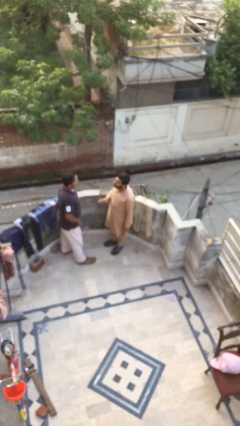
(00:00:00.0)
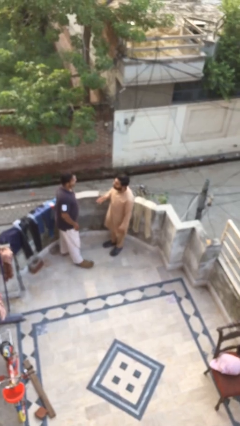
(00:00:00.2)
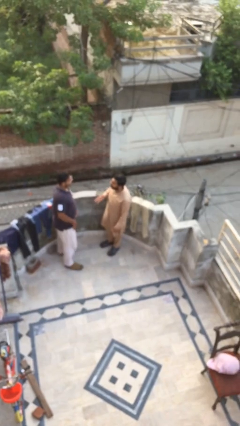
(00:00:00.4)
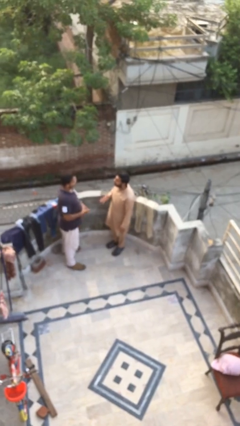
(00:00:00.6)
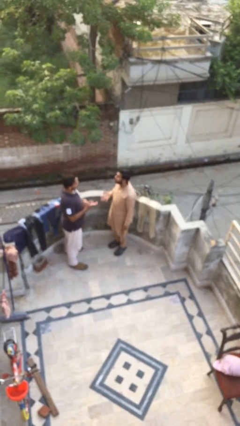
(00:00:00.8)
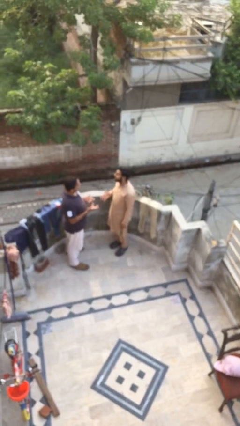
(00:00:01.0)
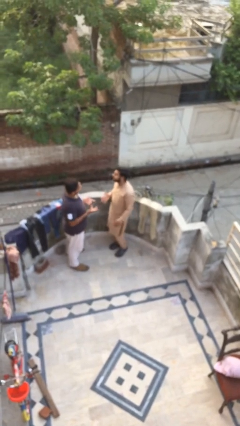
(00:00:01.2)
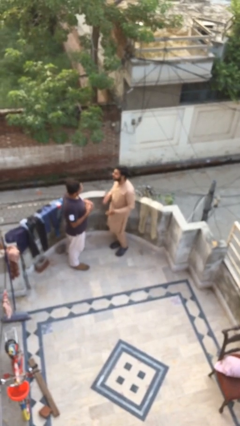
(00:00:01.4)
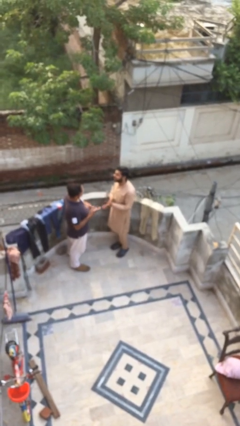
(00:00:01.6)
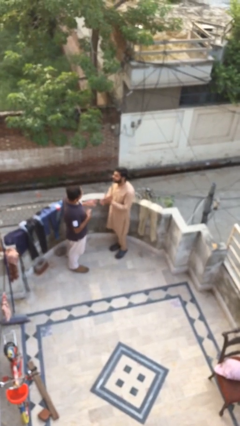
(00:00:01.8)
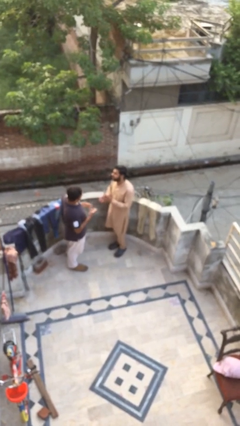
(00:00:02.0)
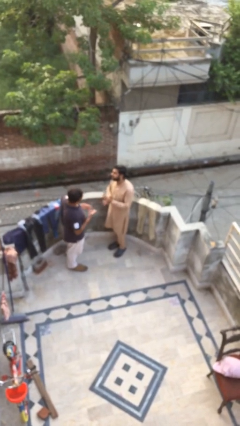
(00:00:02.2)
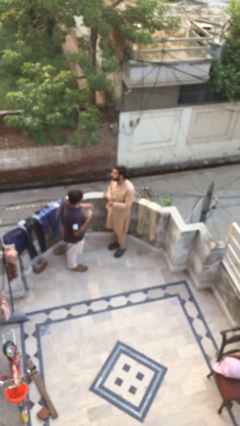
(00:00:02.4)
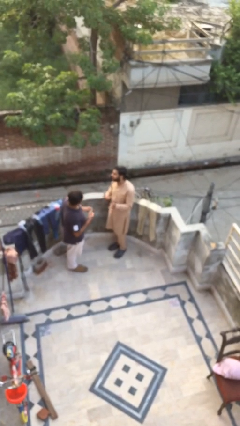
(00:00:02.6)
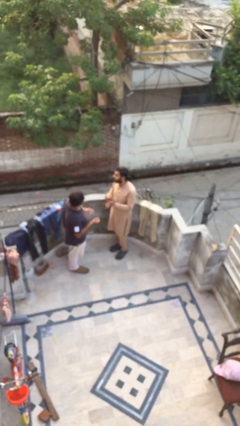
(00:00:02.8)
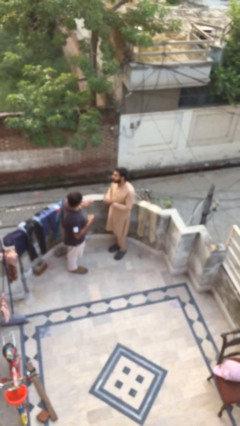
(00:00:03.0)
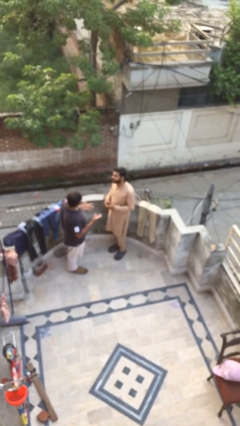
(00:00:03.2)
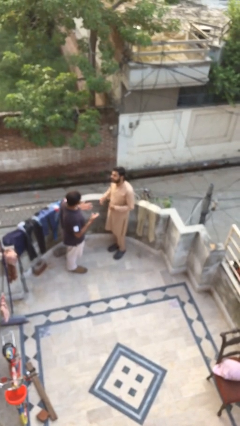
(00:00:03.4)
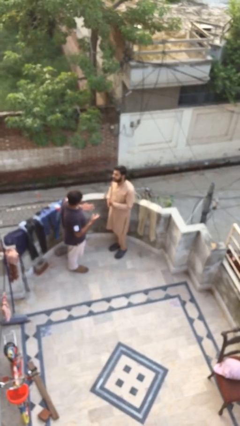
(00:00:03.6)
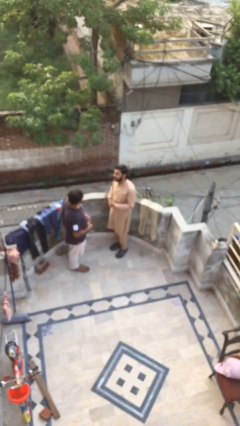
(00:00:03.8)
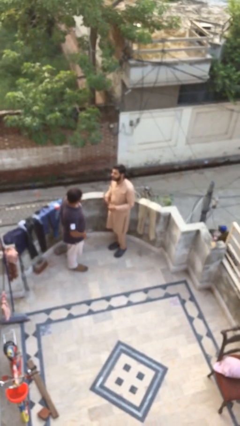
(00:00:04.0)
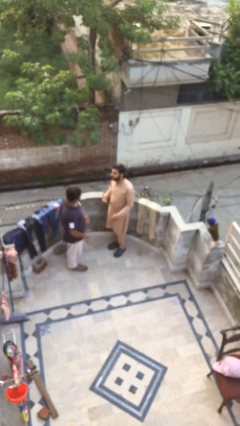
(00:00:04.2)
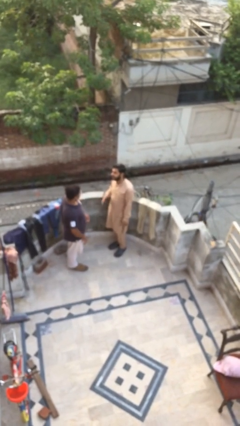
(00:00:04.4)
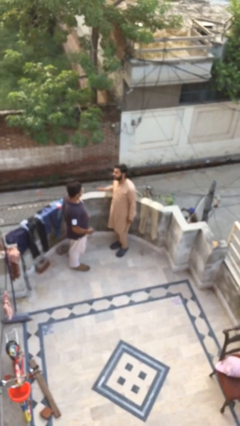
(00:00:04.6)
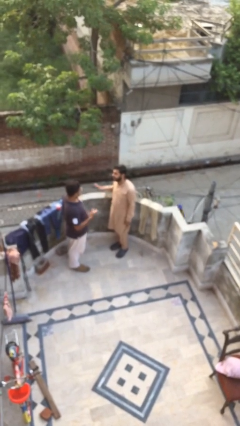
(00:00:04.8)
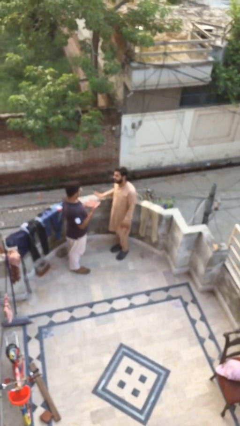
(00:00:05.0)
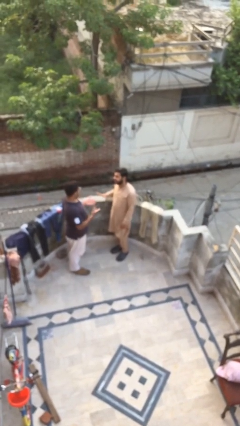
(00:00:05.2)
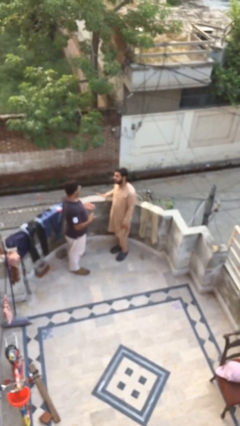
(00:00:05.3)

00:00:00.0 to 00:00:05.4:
person talks to person

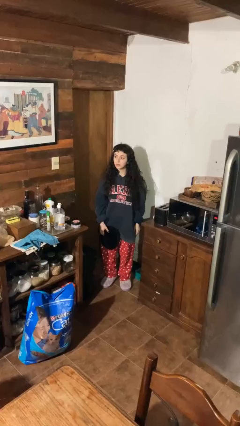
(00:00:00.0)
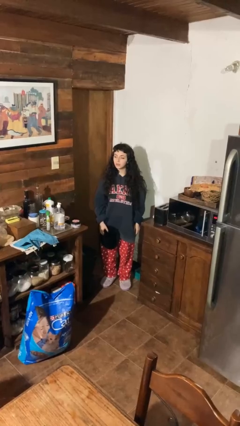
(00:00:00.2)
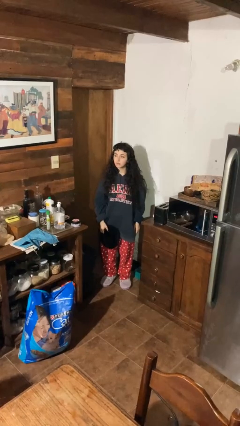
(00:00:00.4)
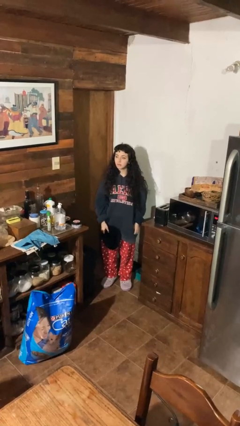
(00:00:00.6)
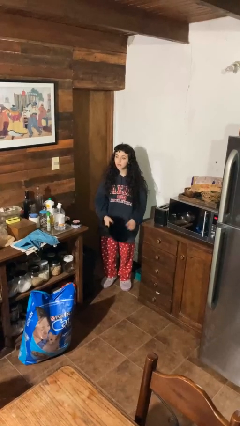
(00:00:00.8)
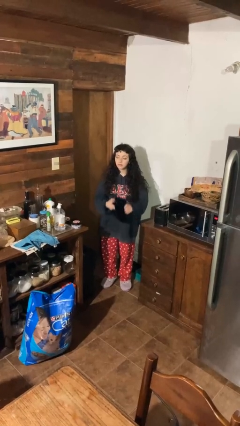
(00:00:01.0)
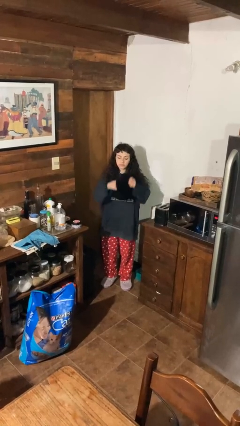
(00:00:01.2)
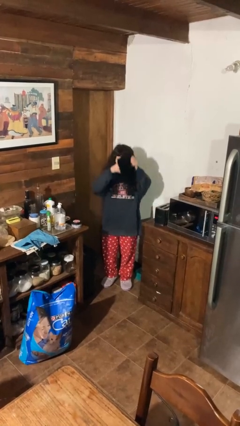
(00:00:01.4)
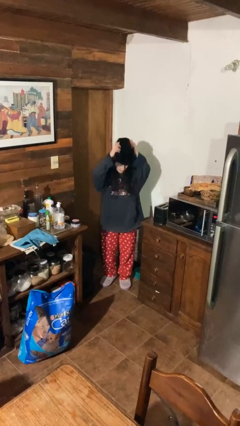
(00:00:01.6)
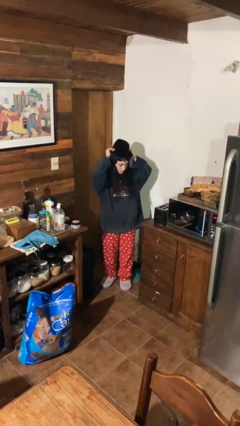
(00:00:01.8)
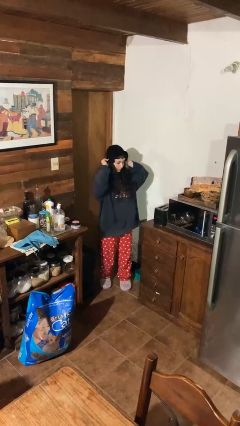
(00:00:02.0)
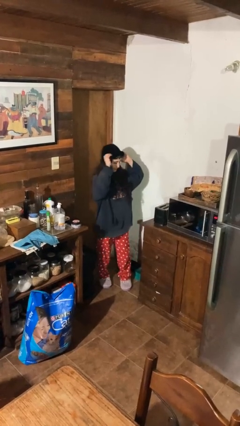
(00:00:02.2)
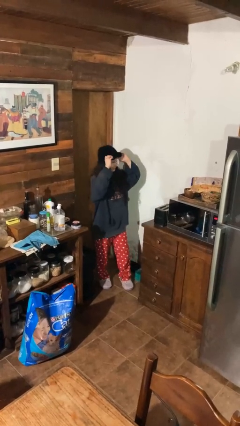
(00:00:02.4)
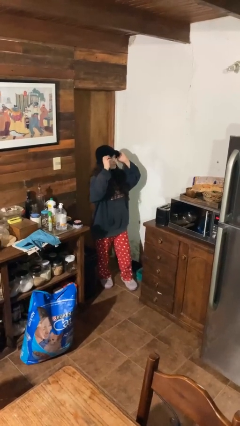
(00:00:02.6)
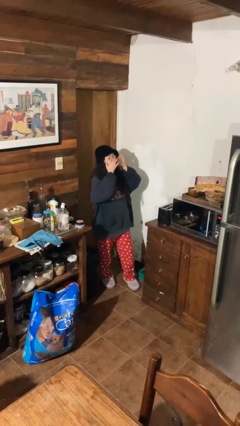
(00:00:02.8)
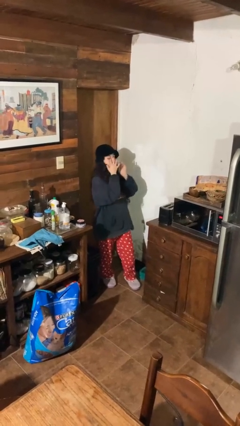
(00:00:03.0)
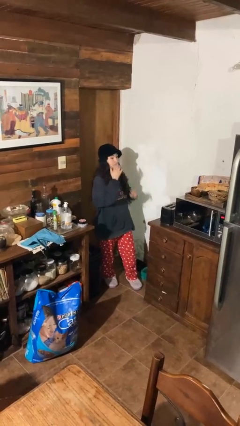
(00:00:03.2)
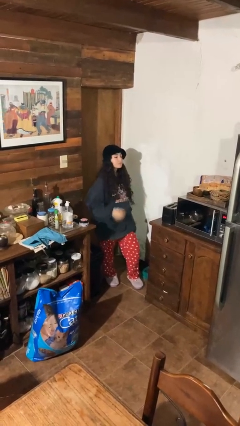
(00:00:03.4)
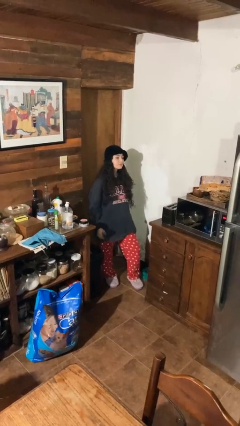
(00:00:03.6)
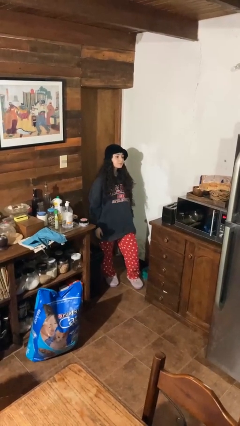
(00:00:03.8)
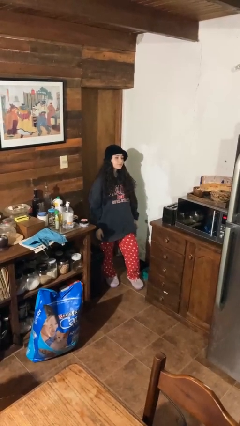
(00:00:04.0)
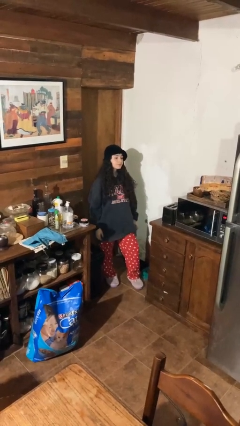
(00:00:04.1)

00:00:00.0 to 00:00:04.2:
person puts on hat

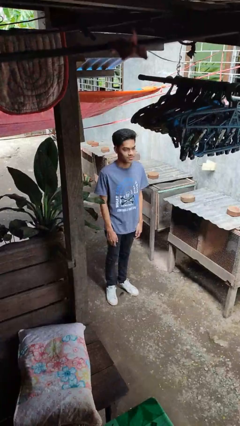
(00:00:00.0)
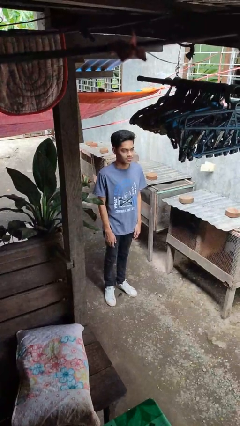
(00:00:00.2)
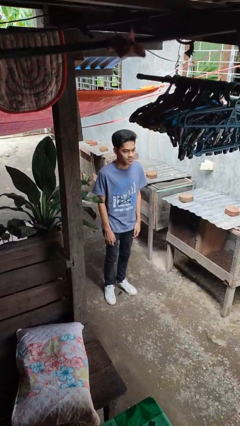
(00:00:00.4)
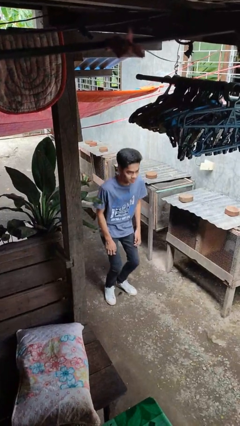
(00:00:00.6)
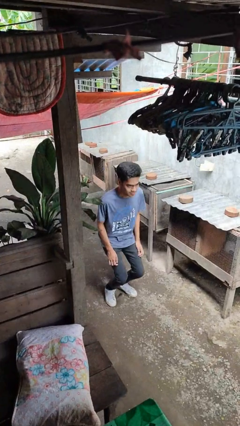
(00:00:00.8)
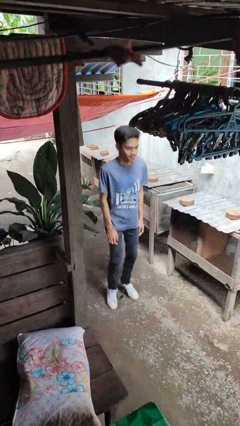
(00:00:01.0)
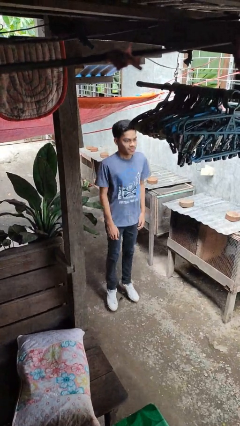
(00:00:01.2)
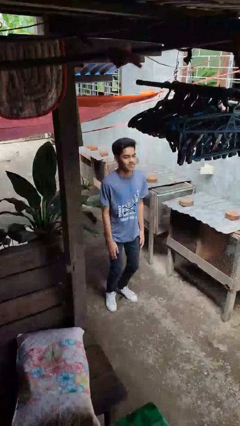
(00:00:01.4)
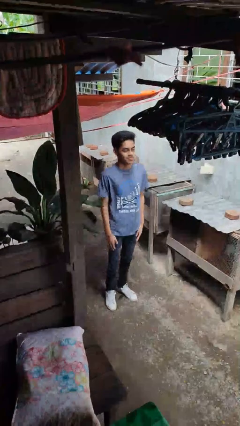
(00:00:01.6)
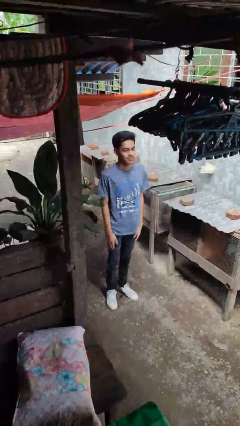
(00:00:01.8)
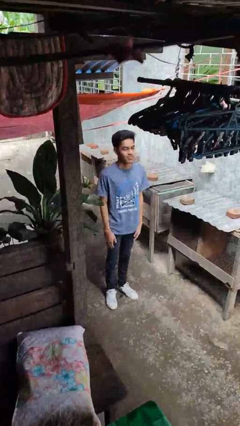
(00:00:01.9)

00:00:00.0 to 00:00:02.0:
person jumps

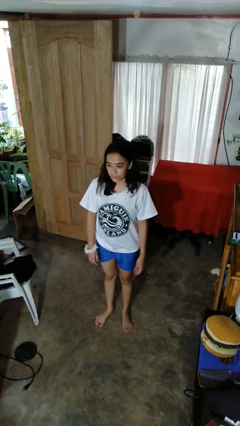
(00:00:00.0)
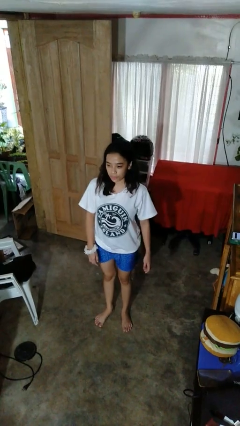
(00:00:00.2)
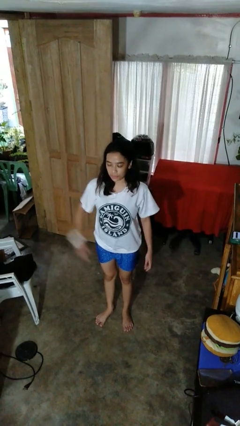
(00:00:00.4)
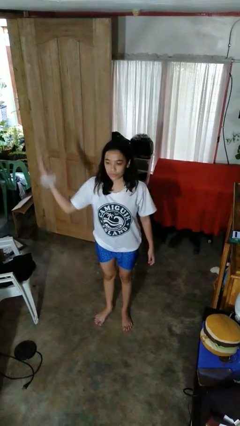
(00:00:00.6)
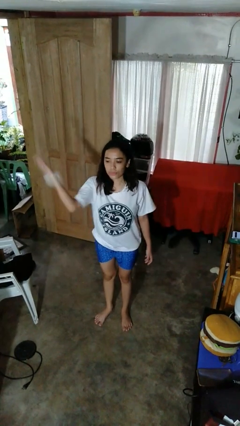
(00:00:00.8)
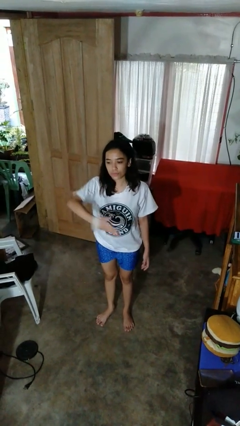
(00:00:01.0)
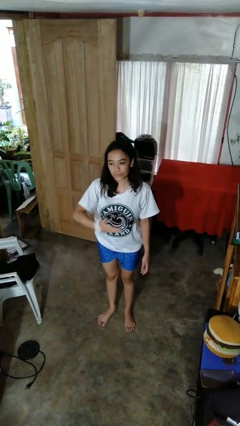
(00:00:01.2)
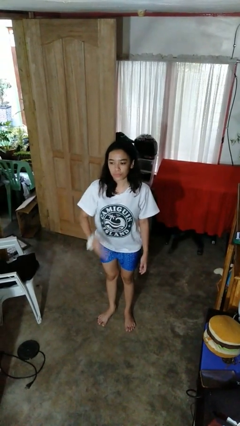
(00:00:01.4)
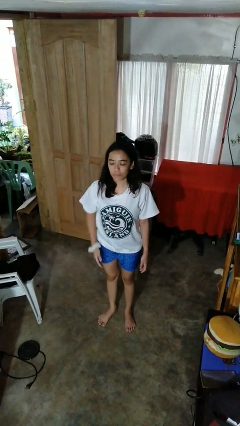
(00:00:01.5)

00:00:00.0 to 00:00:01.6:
person karate chop

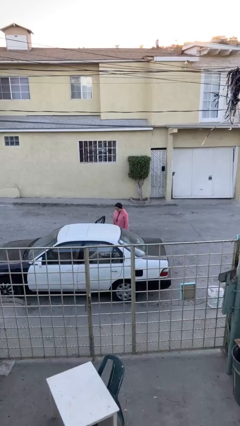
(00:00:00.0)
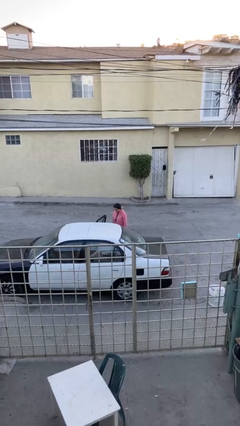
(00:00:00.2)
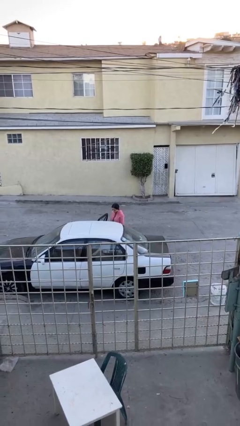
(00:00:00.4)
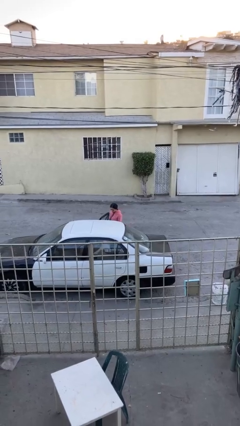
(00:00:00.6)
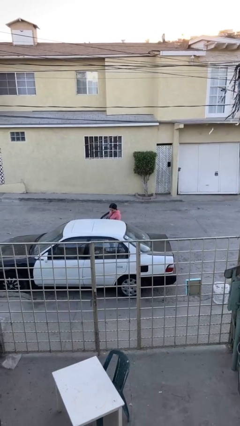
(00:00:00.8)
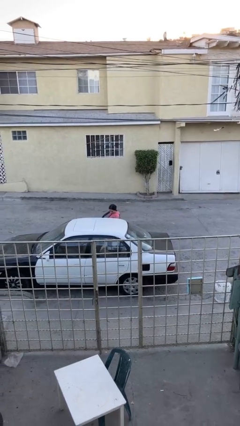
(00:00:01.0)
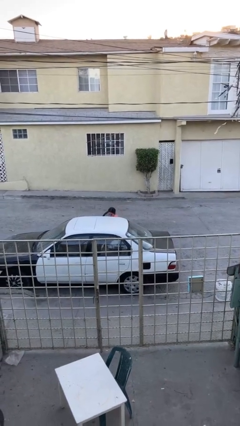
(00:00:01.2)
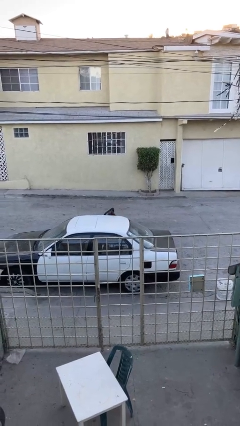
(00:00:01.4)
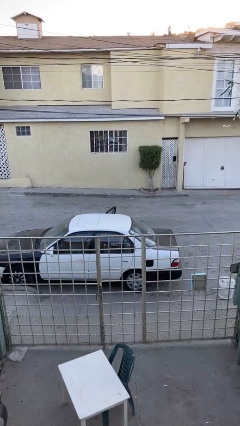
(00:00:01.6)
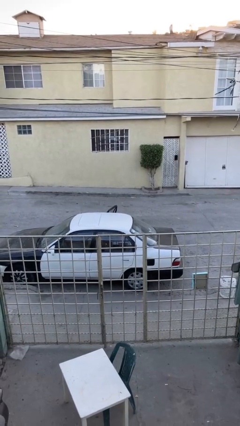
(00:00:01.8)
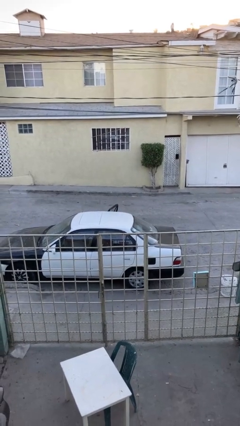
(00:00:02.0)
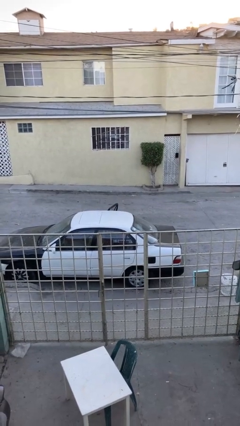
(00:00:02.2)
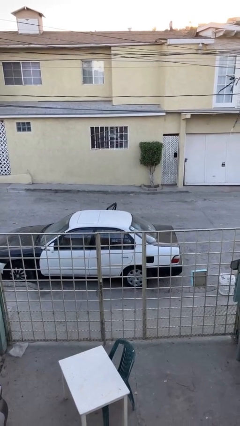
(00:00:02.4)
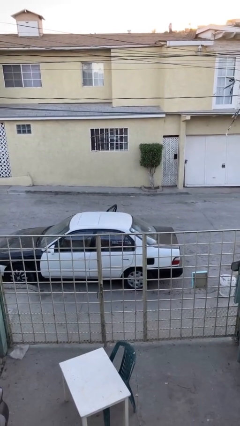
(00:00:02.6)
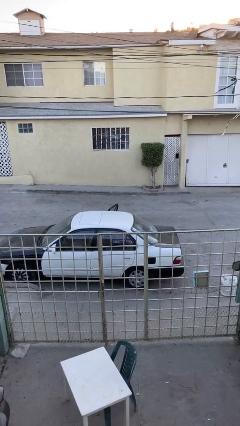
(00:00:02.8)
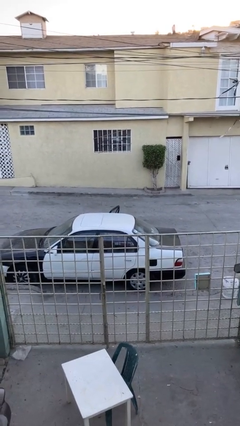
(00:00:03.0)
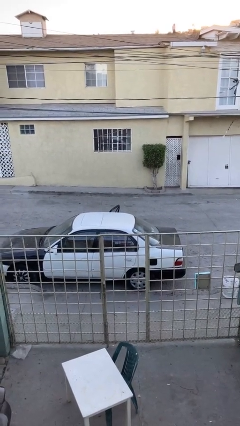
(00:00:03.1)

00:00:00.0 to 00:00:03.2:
person enters car

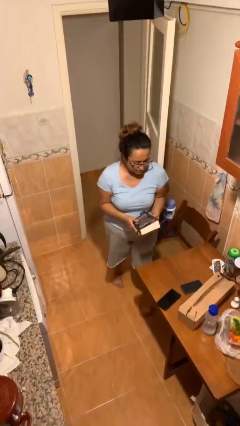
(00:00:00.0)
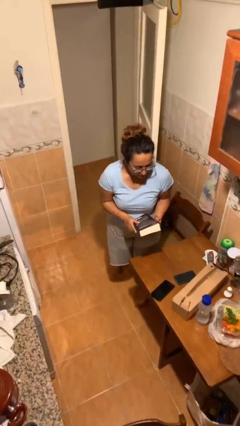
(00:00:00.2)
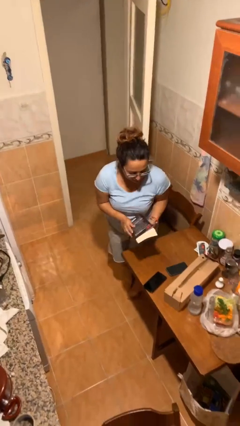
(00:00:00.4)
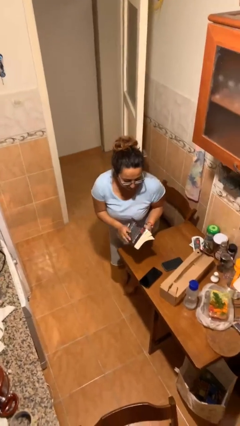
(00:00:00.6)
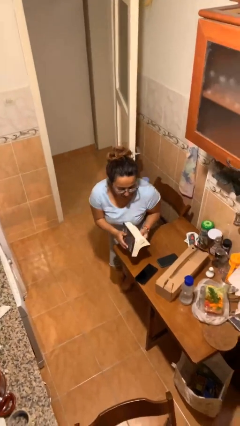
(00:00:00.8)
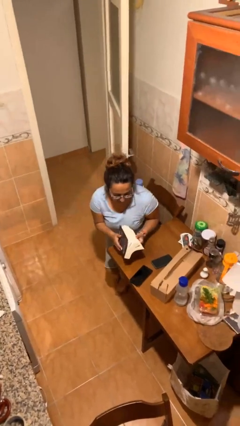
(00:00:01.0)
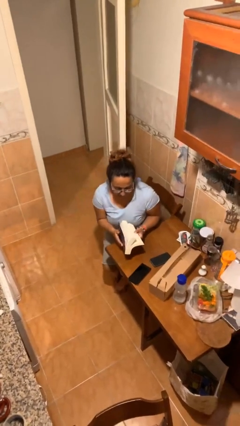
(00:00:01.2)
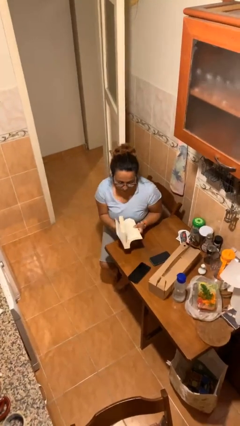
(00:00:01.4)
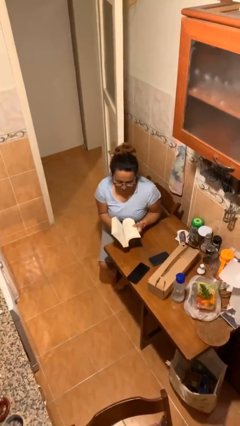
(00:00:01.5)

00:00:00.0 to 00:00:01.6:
person sits down
